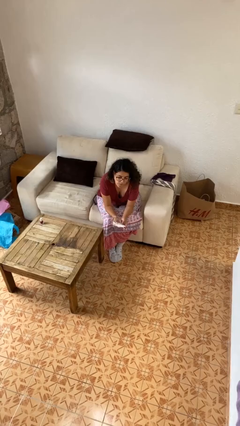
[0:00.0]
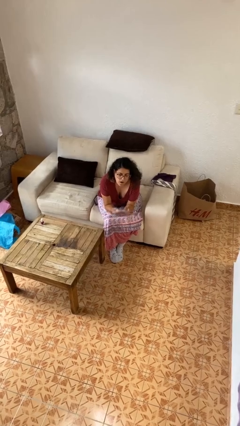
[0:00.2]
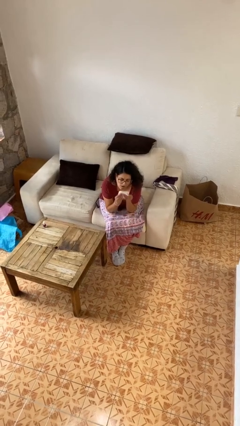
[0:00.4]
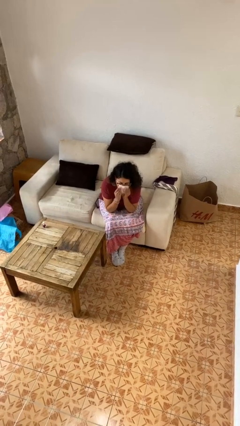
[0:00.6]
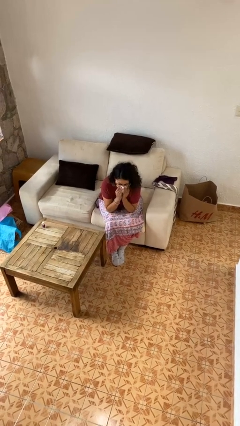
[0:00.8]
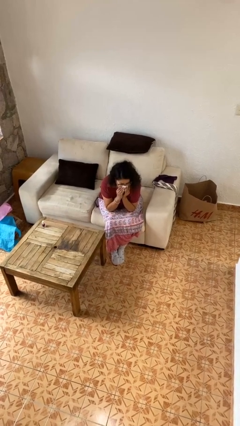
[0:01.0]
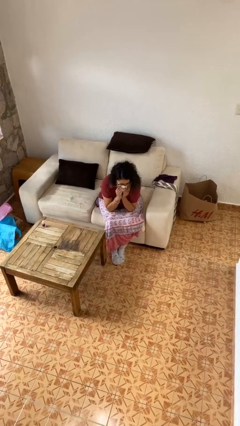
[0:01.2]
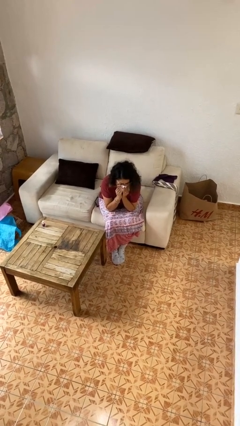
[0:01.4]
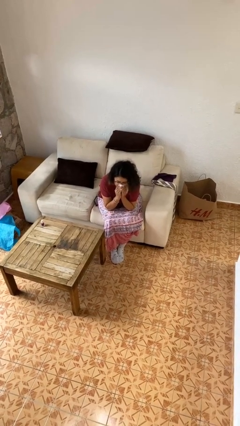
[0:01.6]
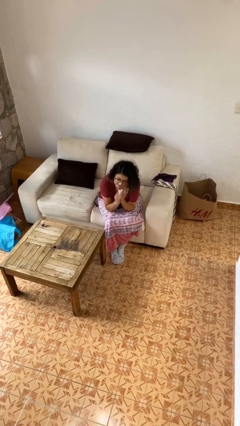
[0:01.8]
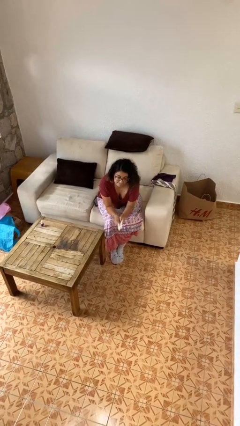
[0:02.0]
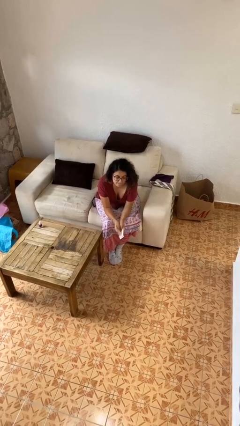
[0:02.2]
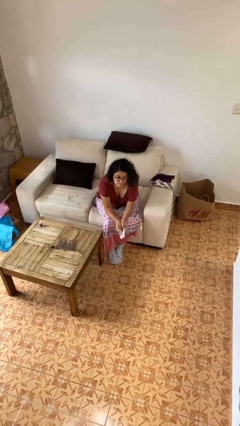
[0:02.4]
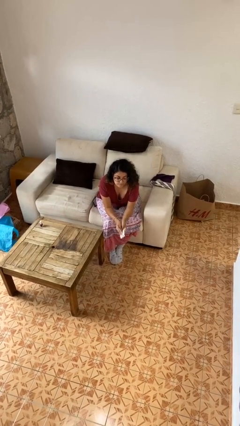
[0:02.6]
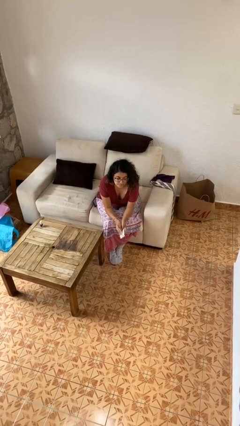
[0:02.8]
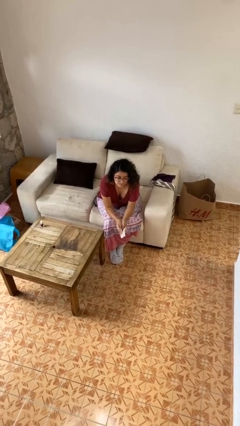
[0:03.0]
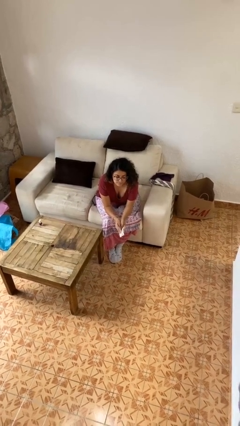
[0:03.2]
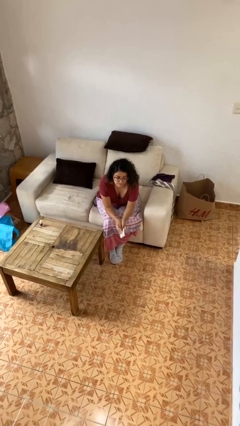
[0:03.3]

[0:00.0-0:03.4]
person blows nose

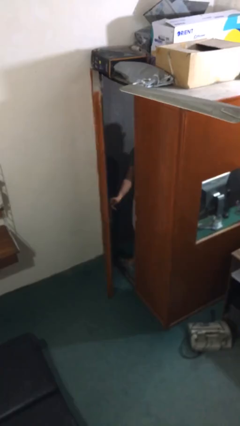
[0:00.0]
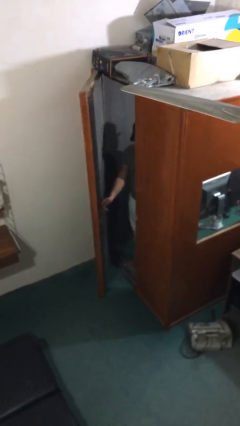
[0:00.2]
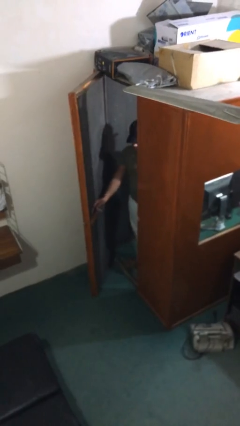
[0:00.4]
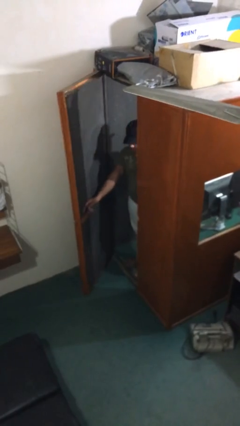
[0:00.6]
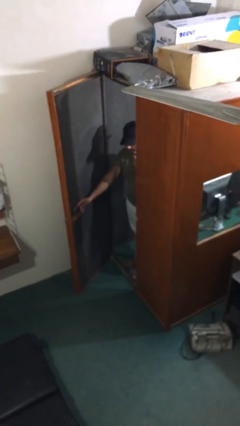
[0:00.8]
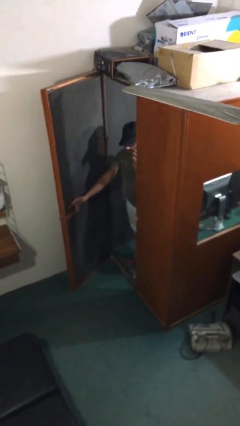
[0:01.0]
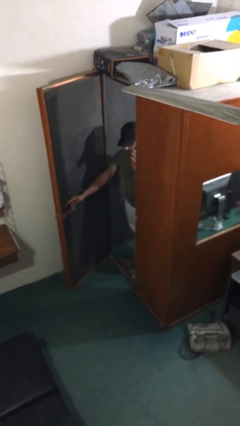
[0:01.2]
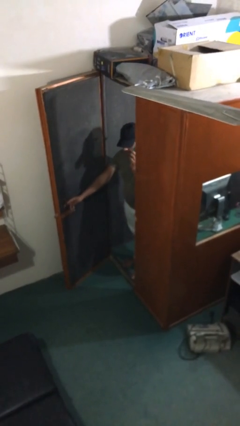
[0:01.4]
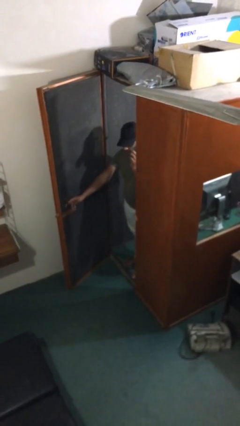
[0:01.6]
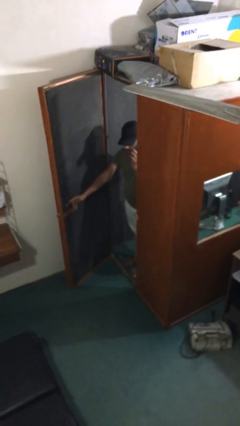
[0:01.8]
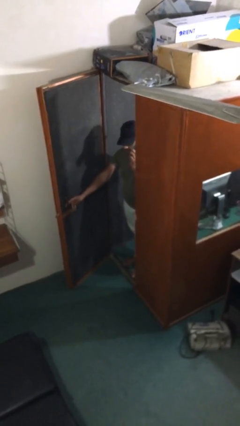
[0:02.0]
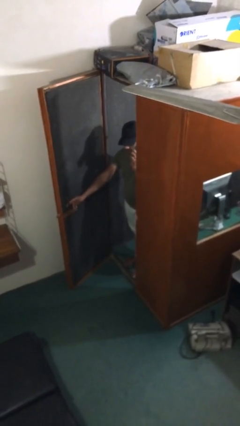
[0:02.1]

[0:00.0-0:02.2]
person opens facility door

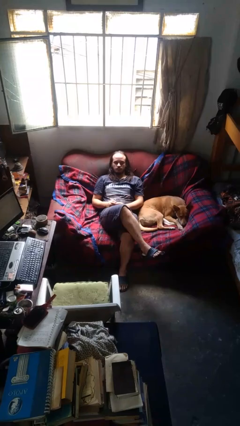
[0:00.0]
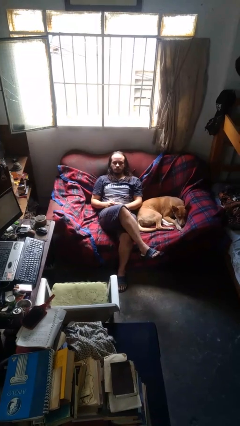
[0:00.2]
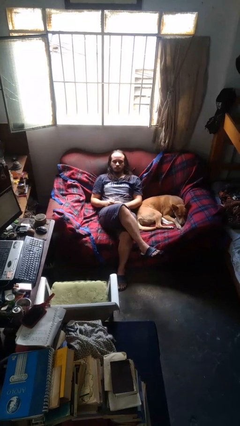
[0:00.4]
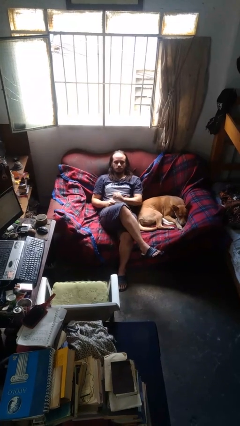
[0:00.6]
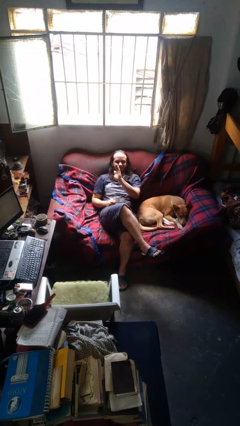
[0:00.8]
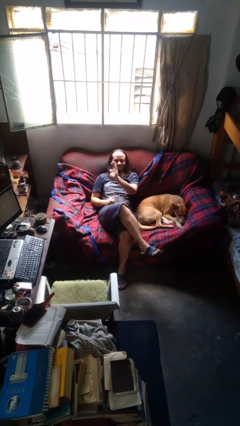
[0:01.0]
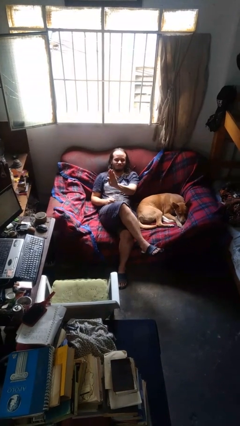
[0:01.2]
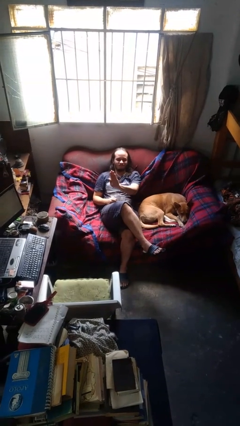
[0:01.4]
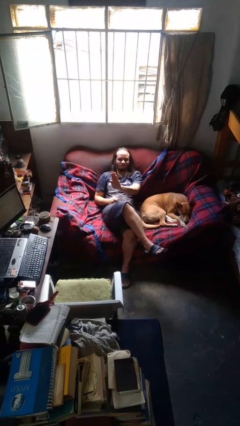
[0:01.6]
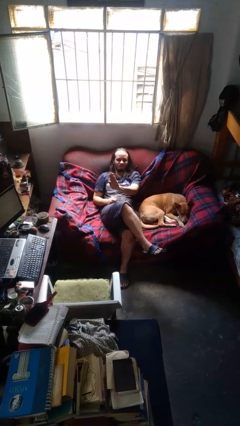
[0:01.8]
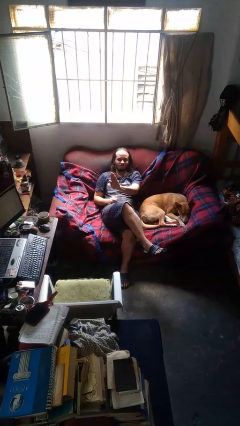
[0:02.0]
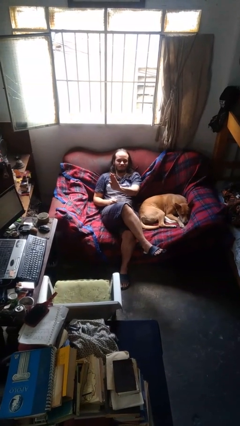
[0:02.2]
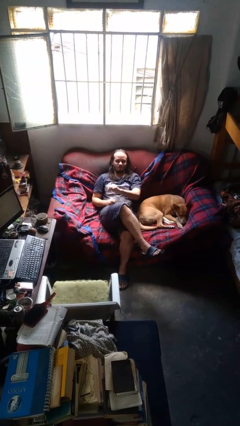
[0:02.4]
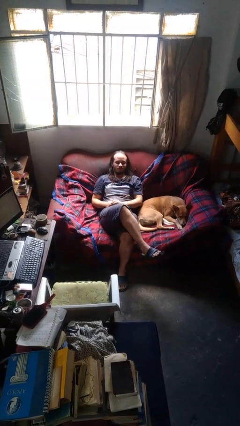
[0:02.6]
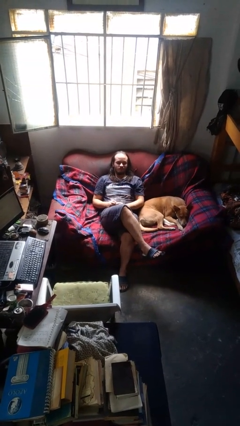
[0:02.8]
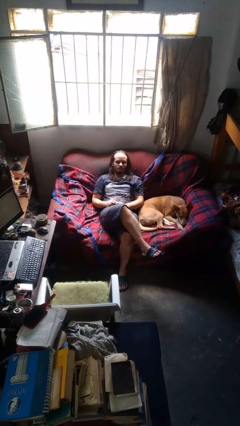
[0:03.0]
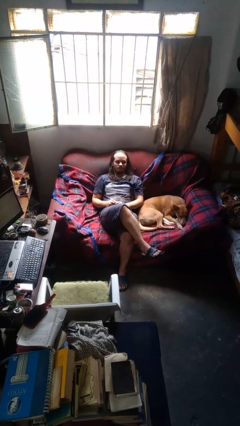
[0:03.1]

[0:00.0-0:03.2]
person gestures stop

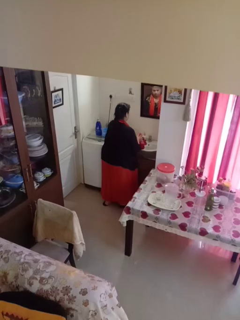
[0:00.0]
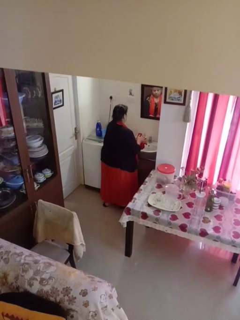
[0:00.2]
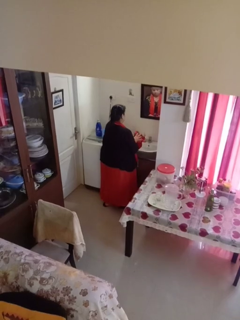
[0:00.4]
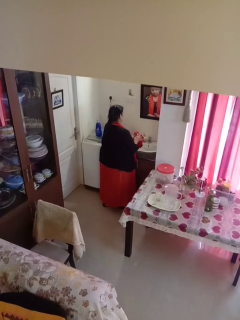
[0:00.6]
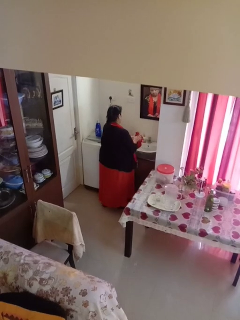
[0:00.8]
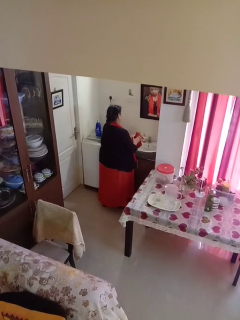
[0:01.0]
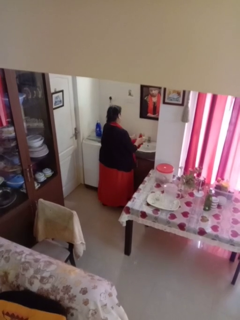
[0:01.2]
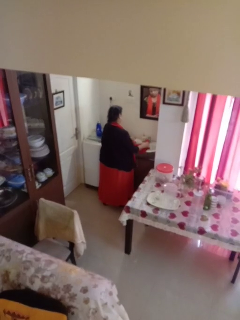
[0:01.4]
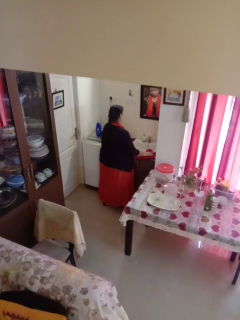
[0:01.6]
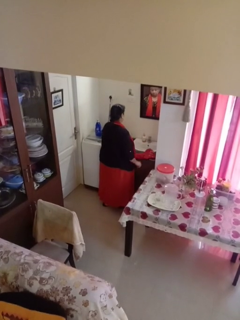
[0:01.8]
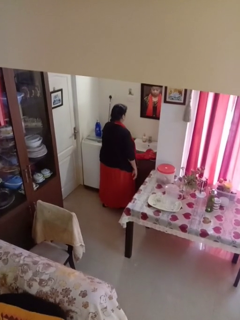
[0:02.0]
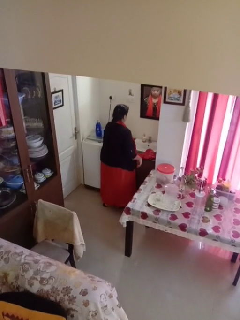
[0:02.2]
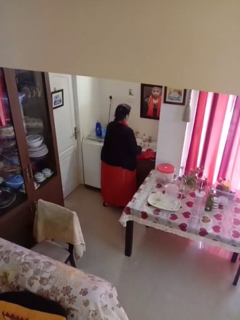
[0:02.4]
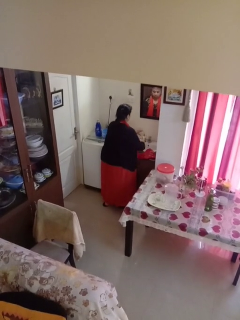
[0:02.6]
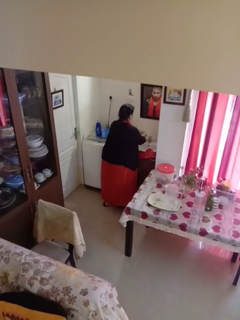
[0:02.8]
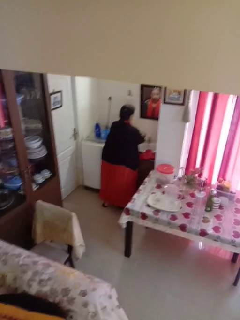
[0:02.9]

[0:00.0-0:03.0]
person dries hands with towel

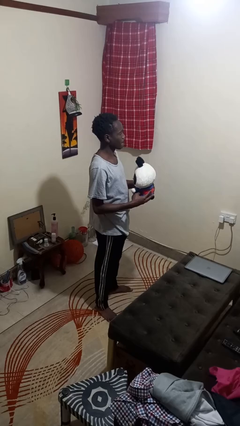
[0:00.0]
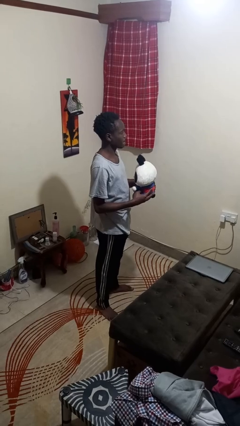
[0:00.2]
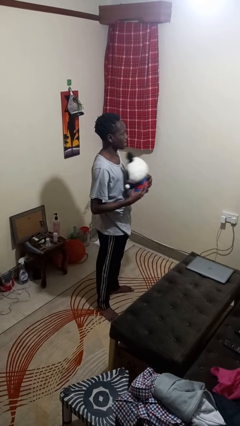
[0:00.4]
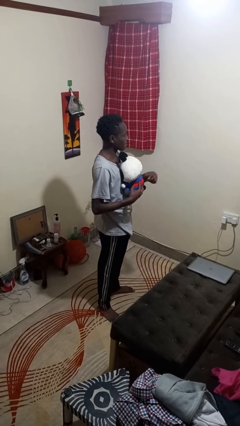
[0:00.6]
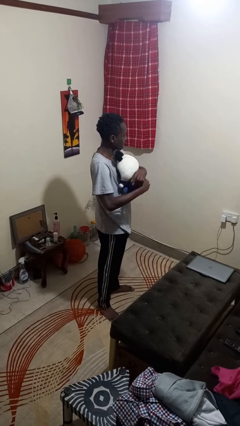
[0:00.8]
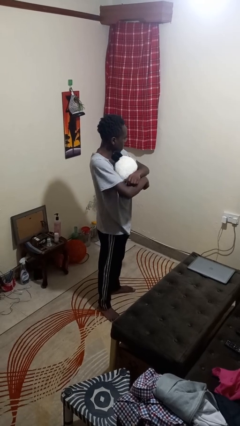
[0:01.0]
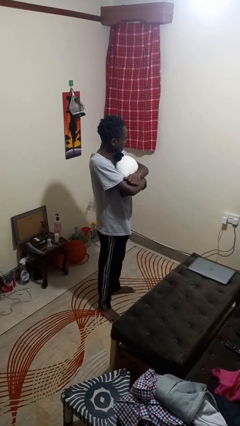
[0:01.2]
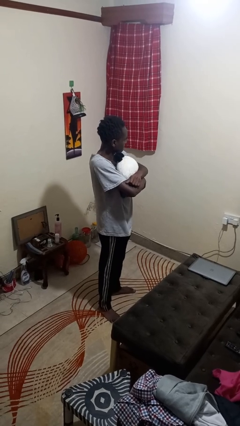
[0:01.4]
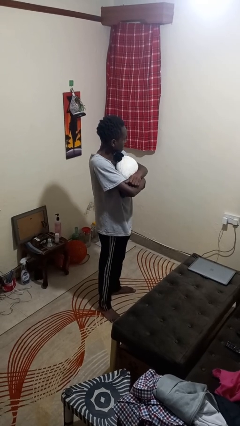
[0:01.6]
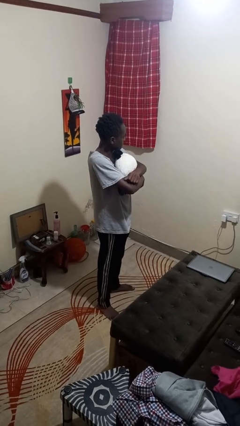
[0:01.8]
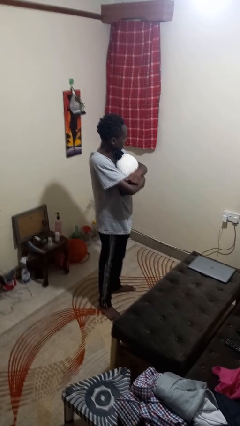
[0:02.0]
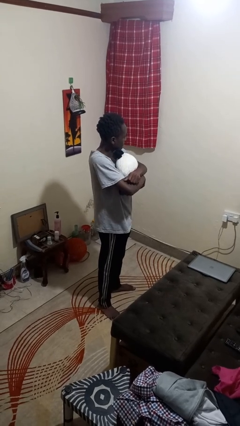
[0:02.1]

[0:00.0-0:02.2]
person hugs stuffed animal

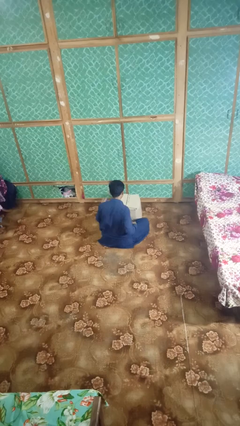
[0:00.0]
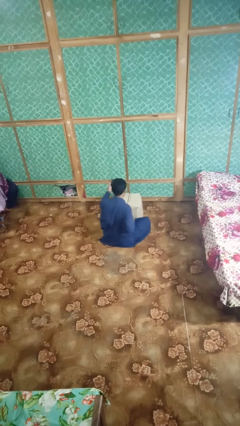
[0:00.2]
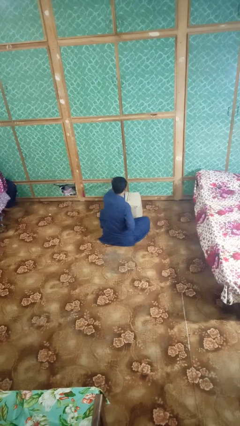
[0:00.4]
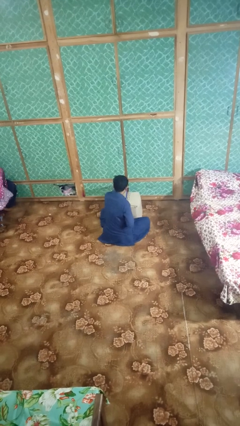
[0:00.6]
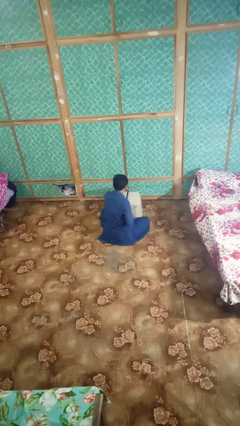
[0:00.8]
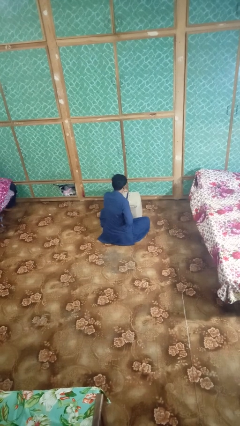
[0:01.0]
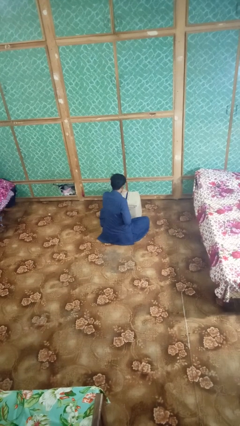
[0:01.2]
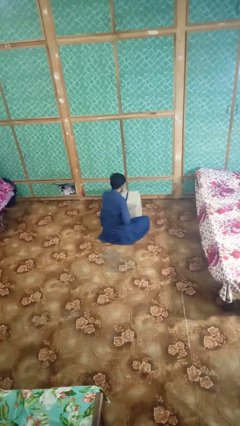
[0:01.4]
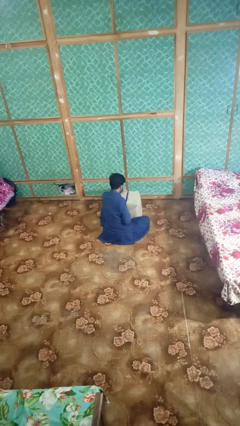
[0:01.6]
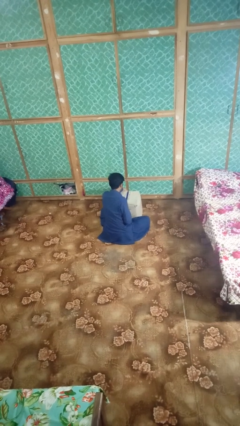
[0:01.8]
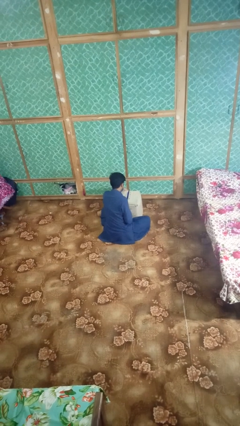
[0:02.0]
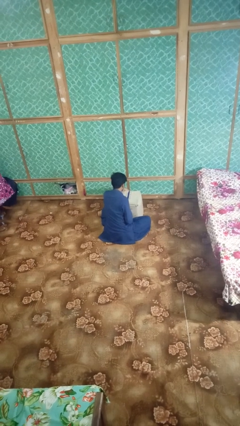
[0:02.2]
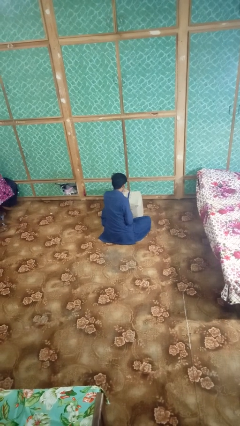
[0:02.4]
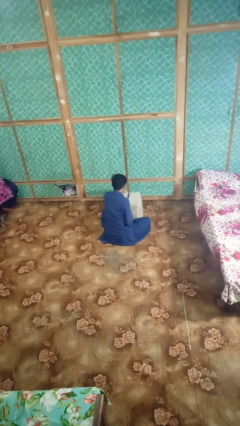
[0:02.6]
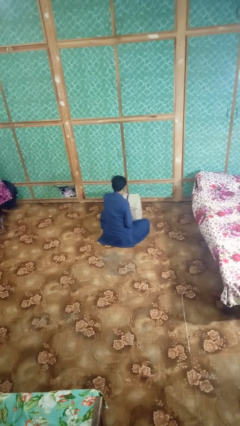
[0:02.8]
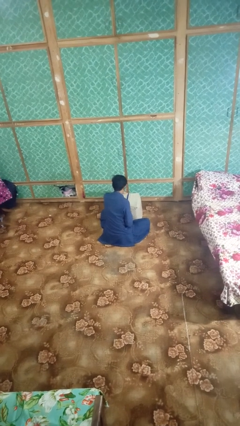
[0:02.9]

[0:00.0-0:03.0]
person wraps box

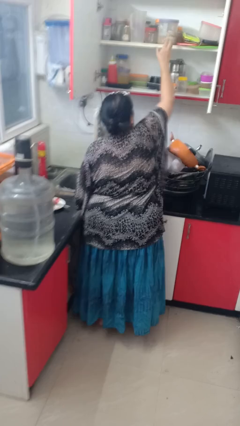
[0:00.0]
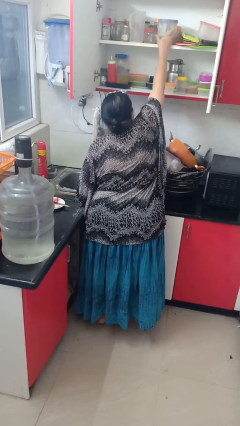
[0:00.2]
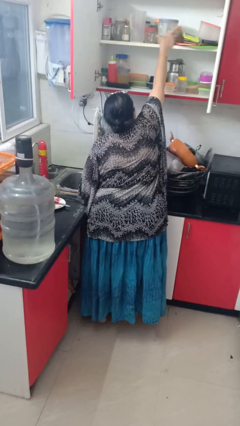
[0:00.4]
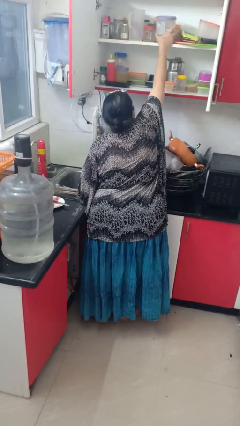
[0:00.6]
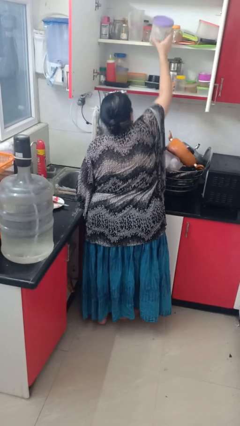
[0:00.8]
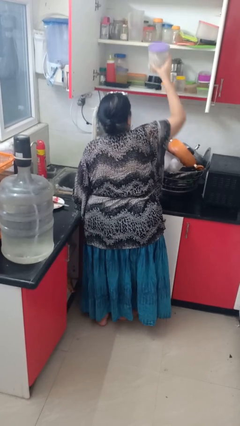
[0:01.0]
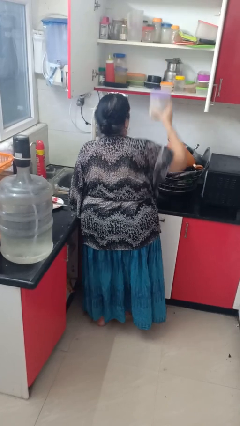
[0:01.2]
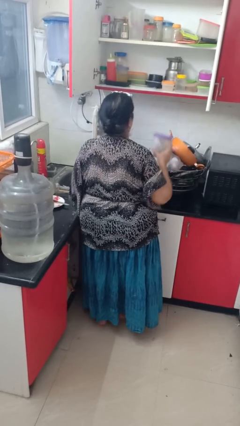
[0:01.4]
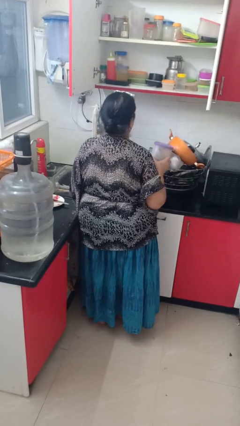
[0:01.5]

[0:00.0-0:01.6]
person puts object in cabinet
